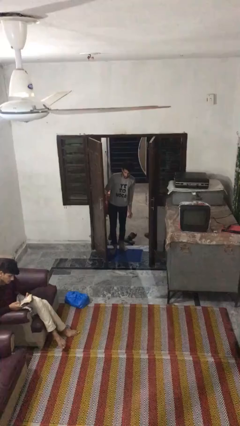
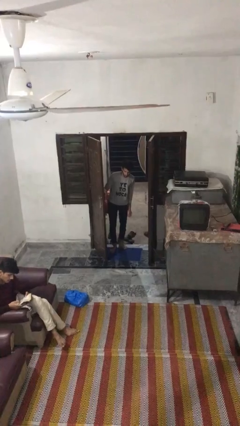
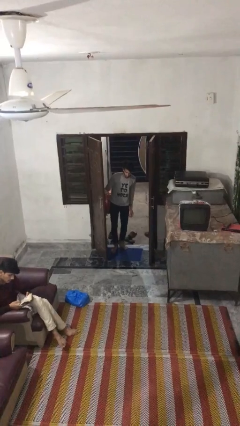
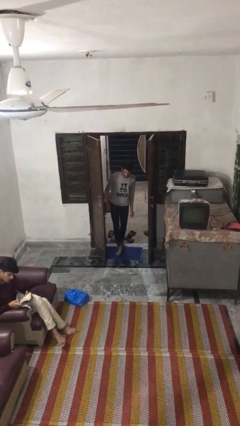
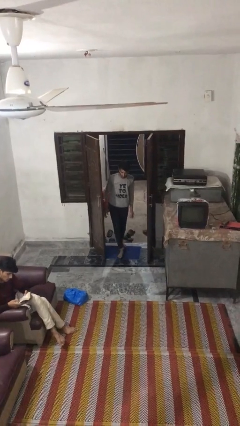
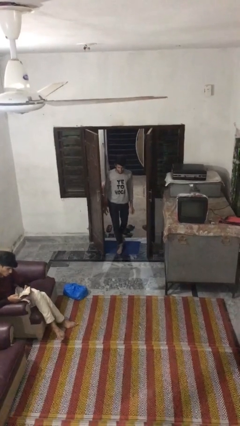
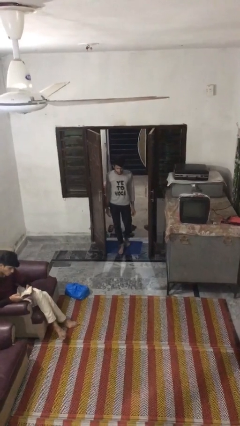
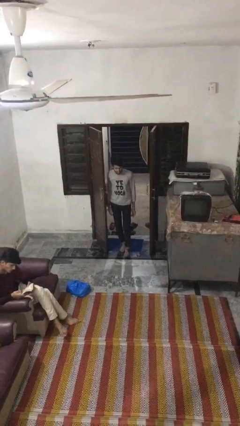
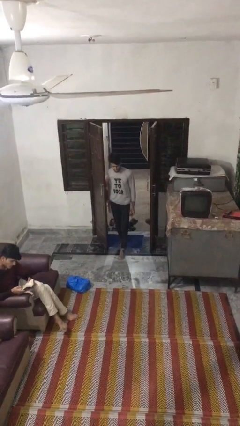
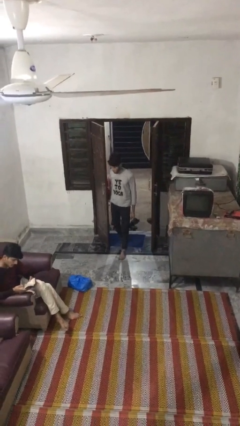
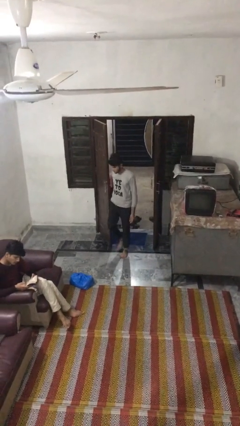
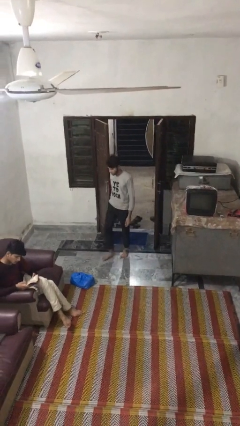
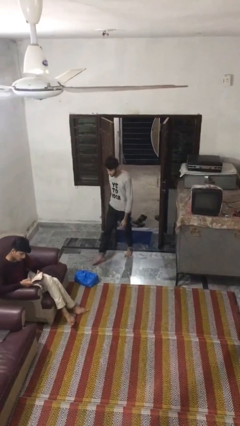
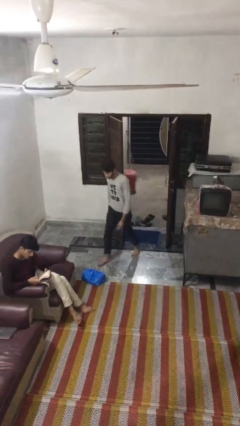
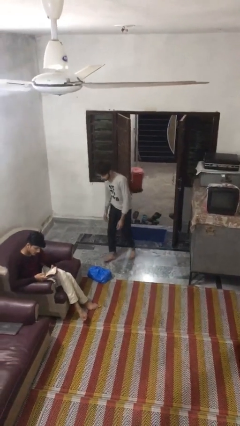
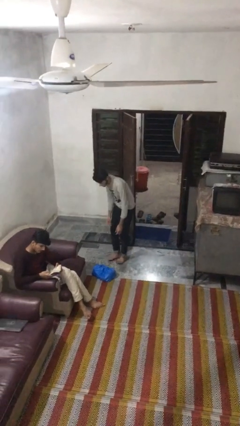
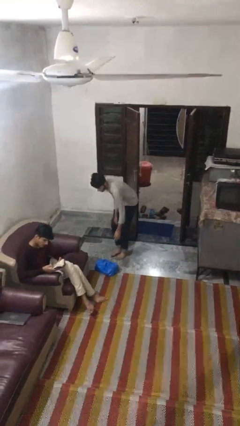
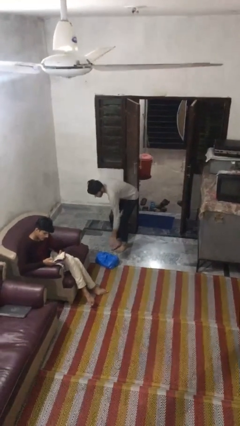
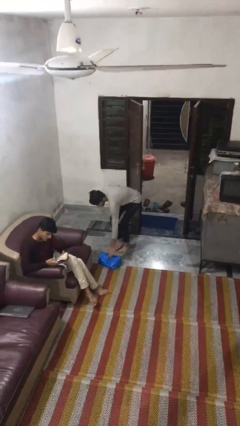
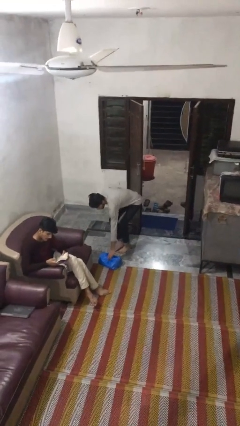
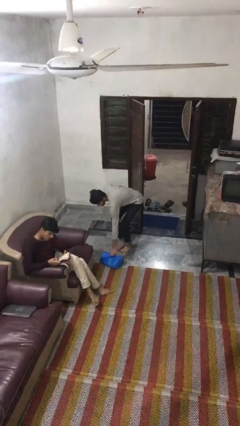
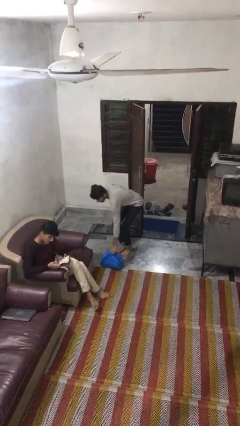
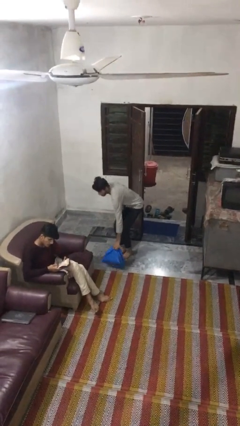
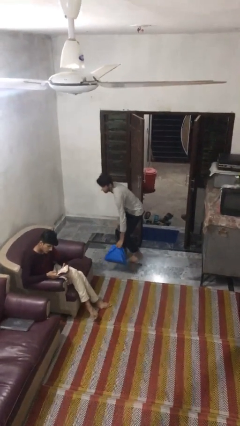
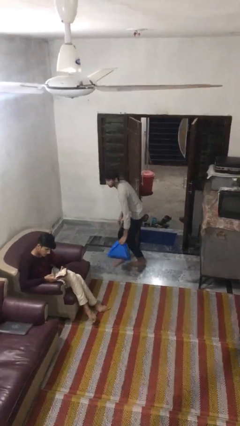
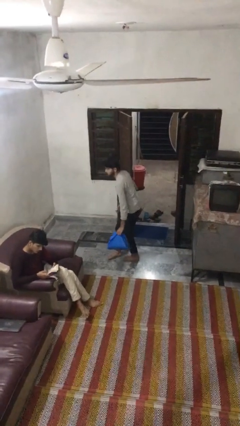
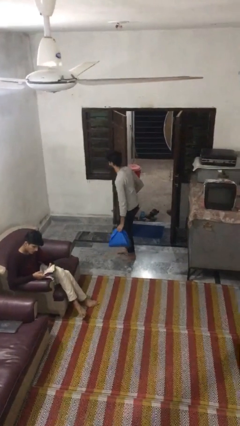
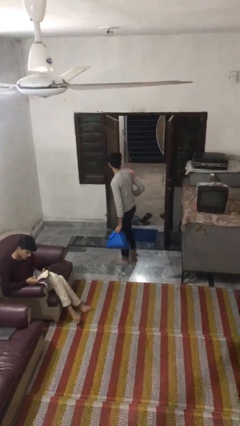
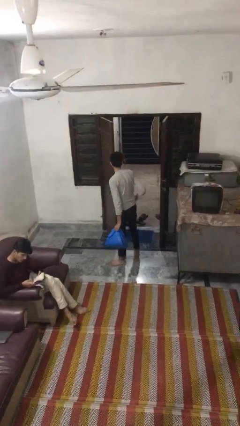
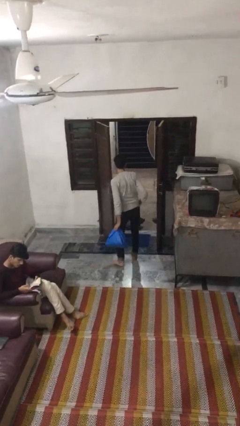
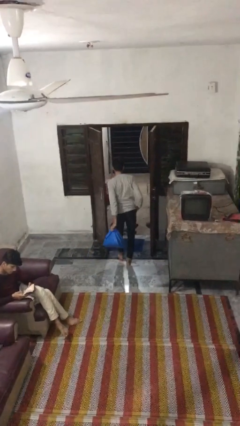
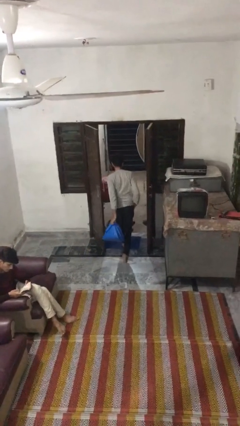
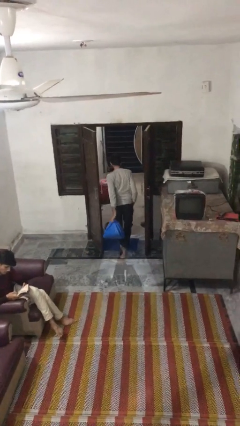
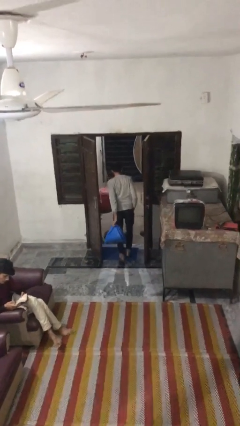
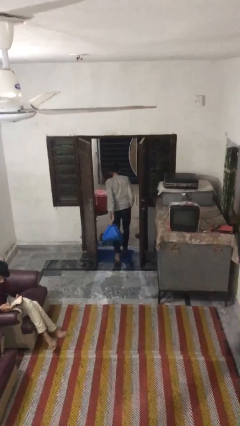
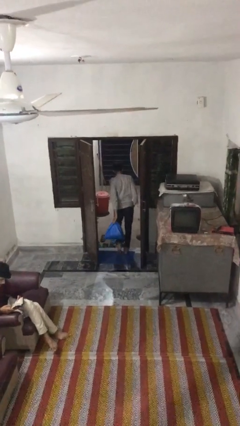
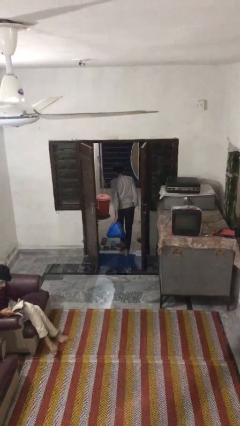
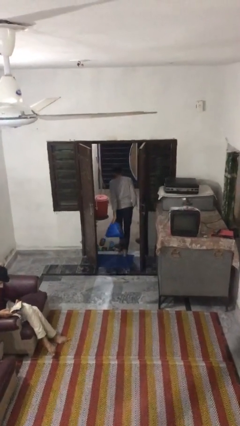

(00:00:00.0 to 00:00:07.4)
person steals object from person

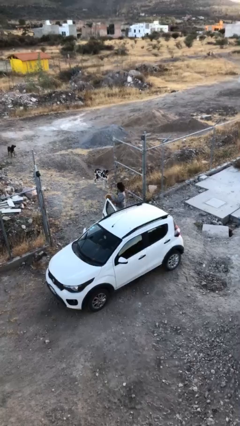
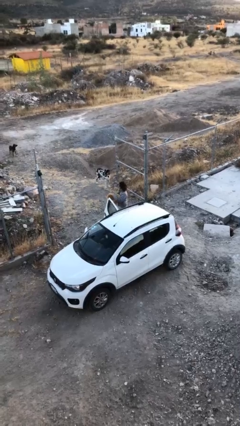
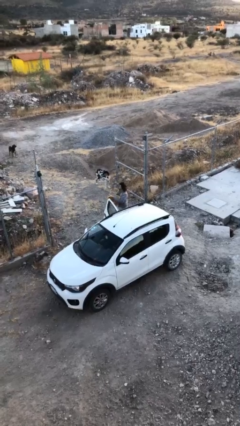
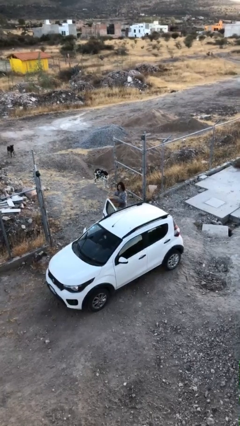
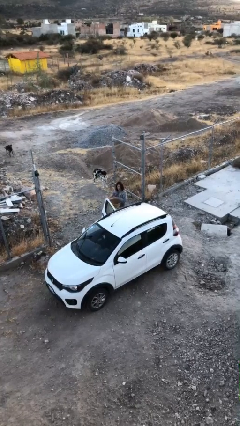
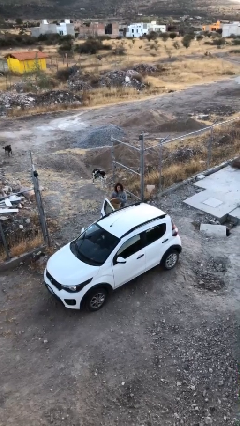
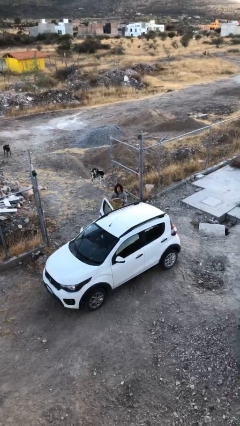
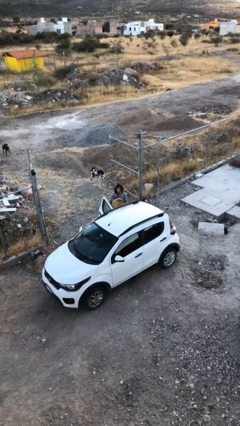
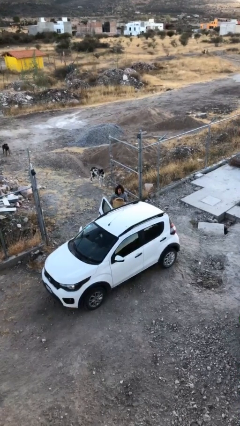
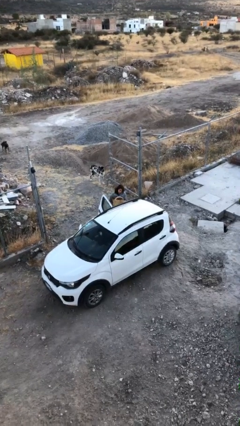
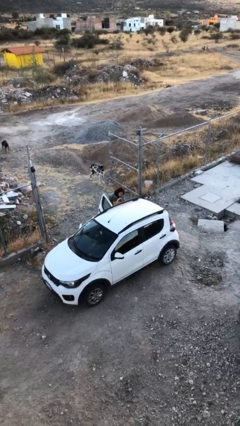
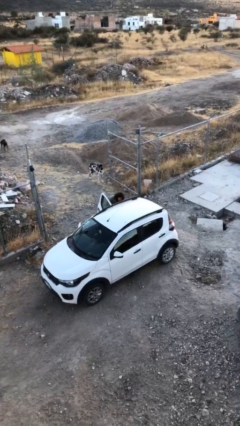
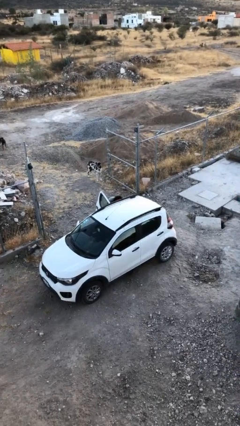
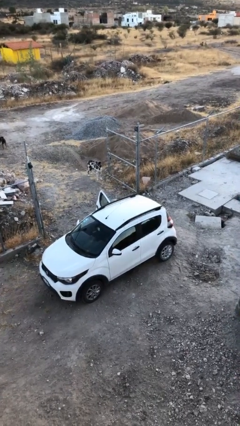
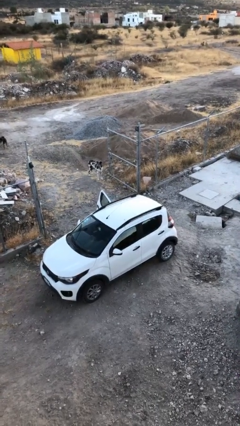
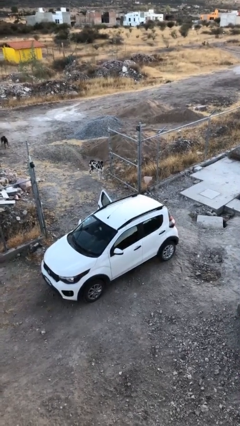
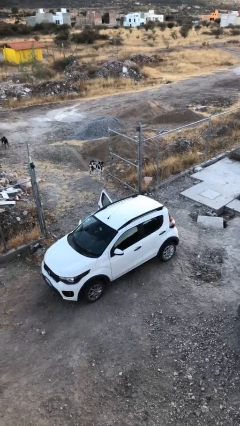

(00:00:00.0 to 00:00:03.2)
person loads car

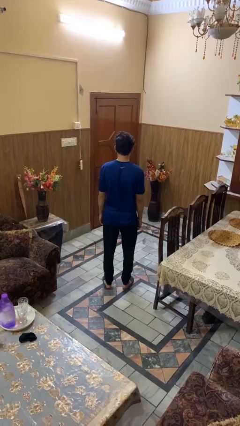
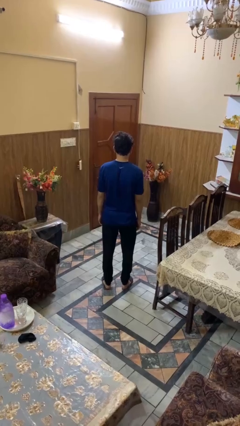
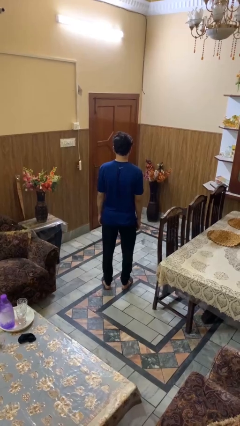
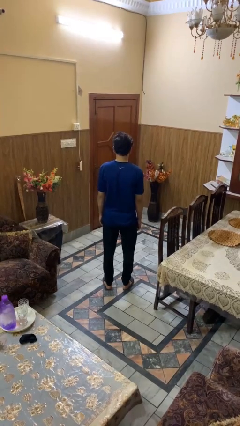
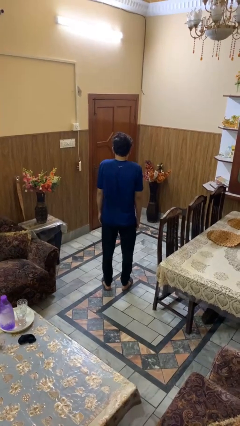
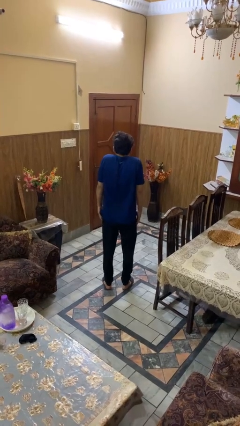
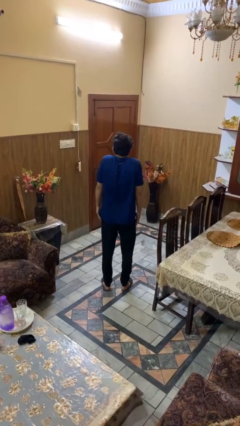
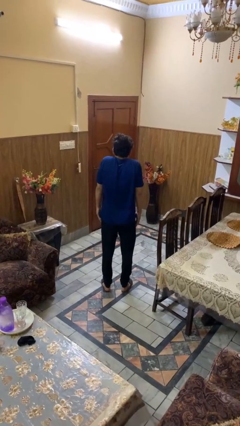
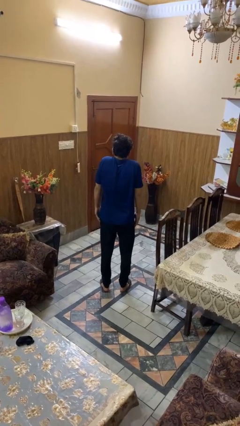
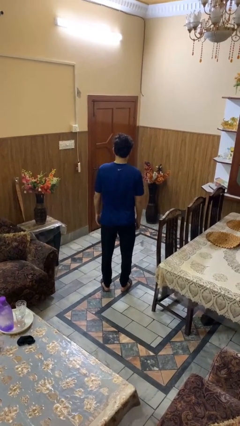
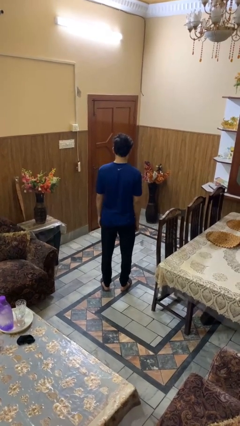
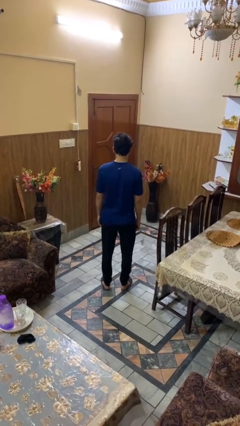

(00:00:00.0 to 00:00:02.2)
person shrugs

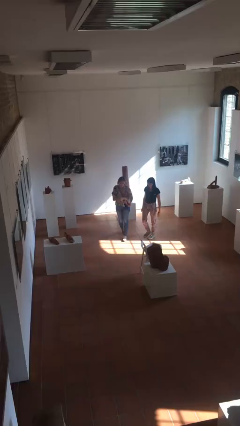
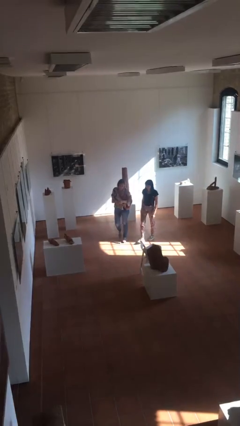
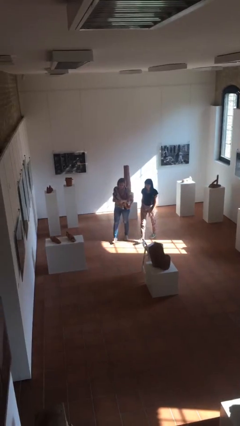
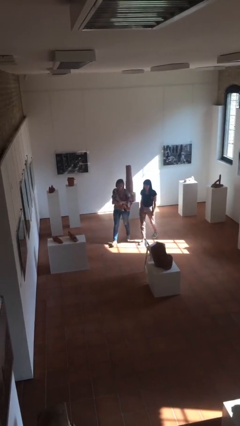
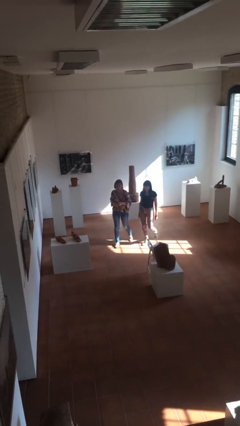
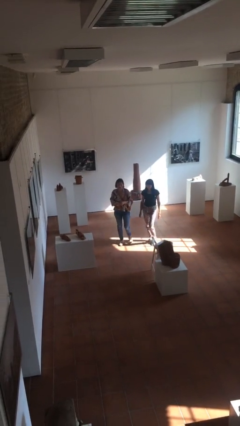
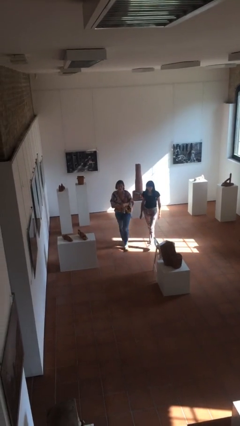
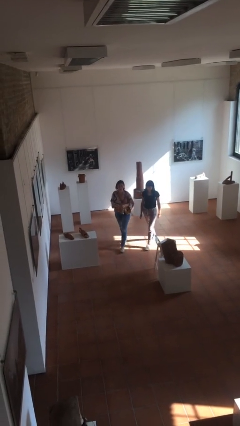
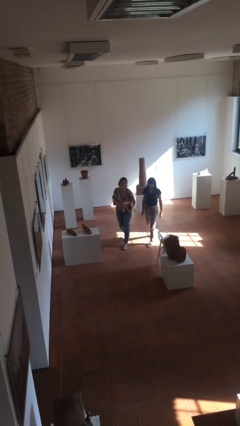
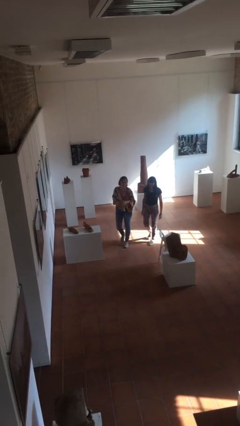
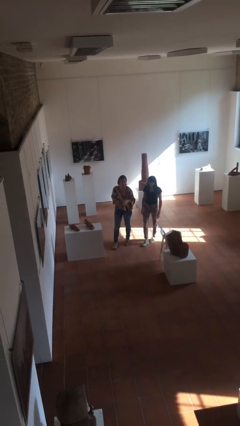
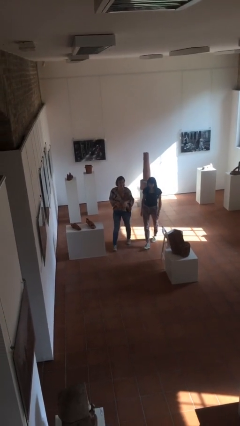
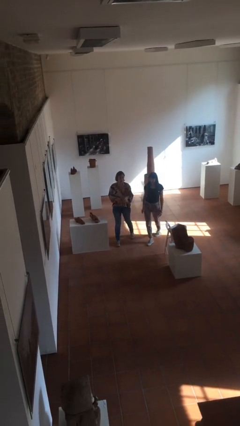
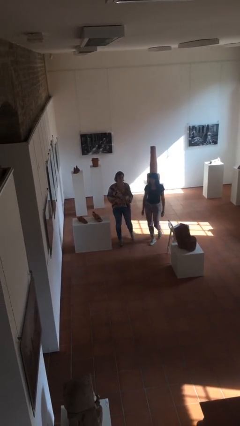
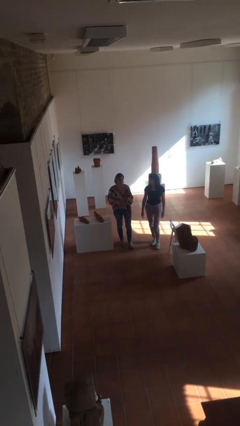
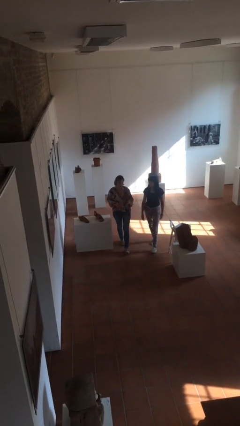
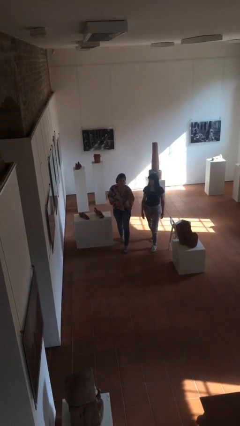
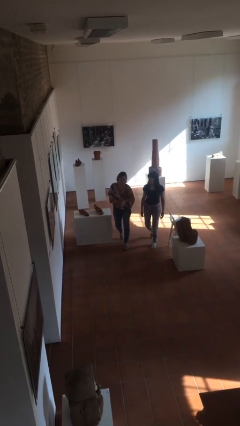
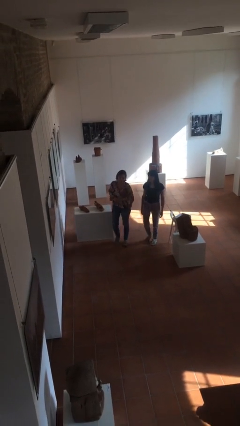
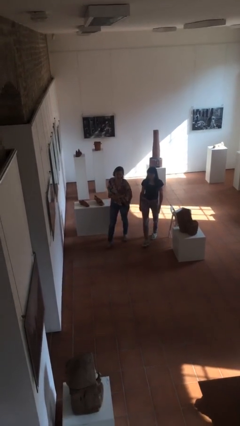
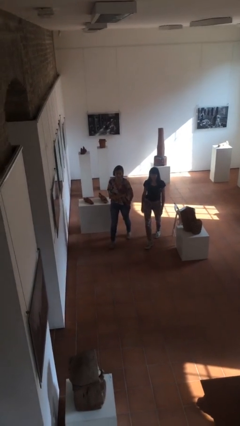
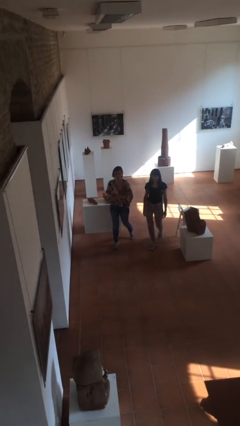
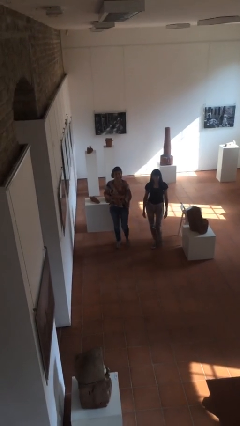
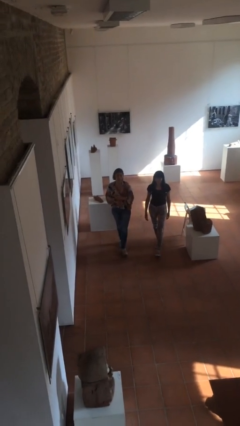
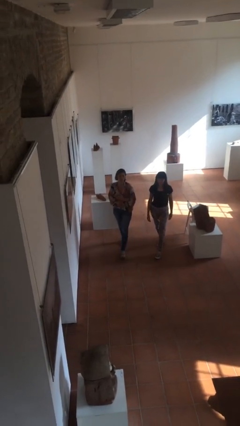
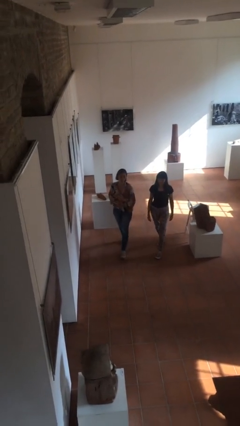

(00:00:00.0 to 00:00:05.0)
person talks to person

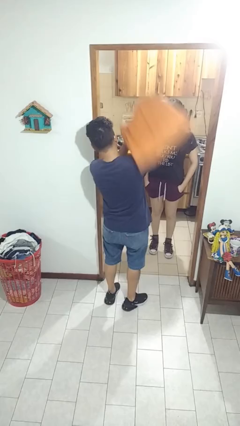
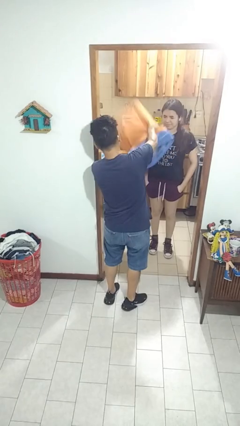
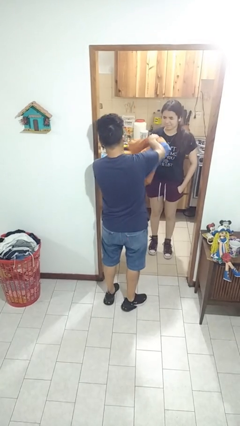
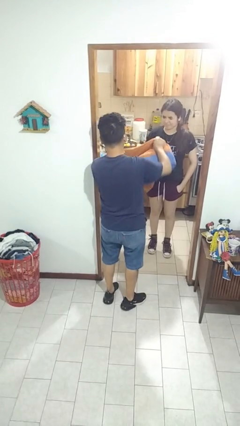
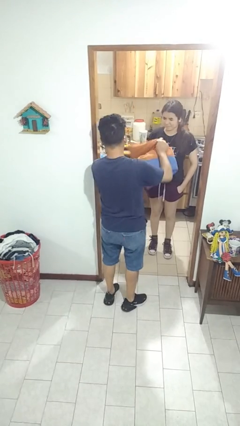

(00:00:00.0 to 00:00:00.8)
person hits person with pillow
